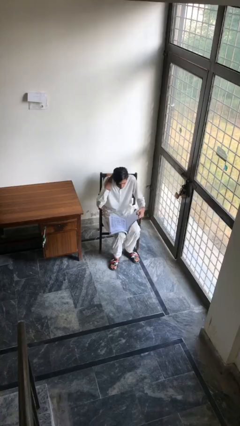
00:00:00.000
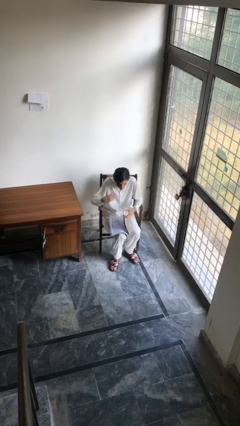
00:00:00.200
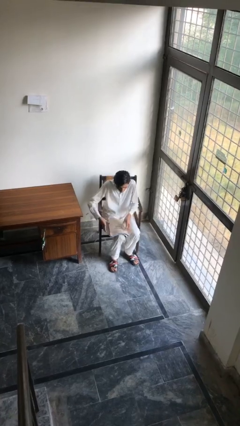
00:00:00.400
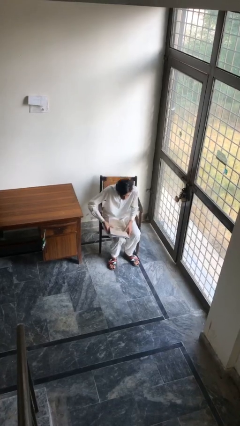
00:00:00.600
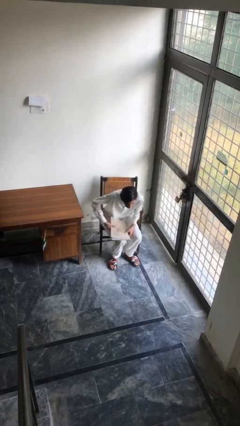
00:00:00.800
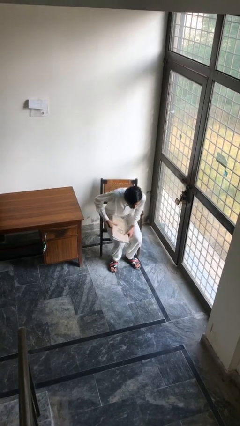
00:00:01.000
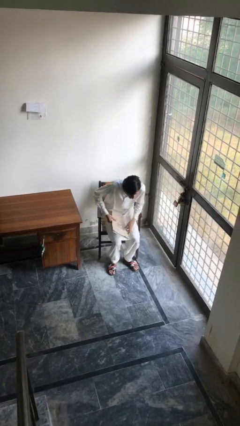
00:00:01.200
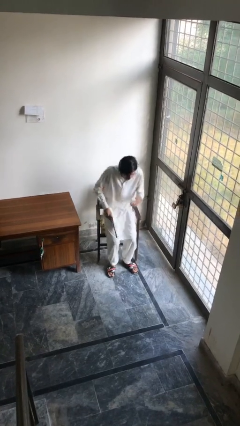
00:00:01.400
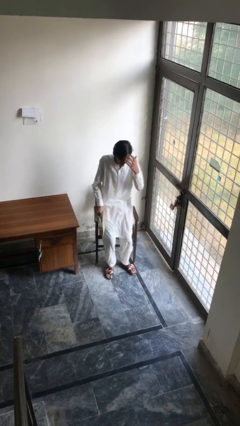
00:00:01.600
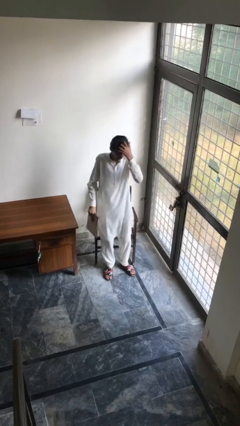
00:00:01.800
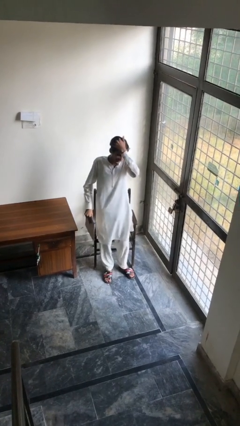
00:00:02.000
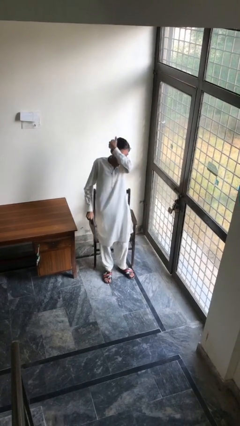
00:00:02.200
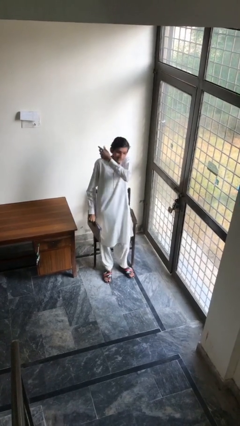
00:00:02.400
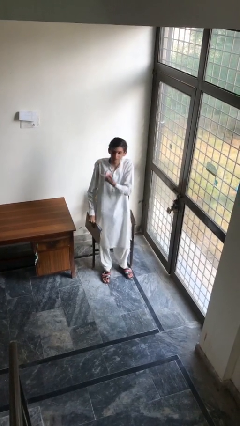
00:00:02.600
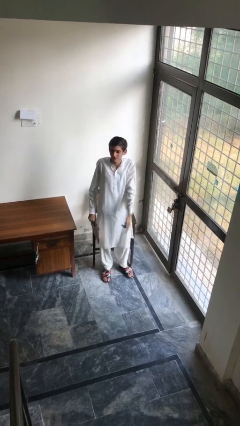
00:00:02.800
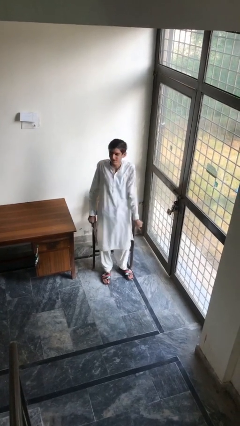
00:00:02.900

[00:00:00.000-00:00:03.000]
person stands up

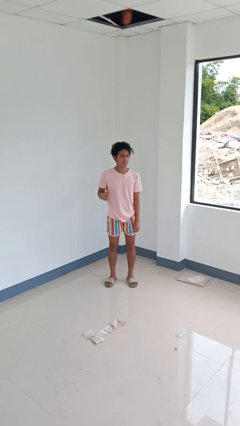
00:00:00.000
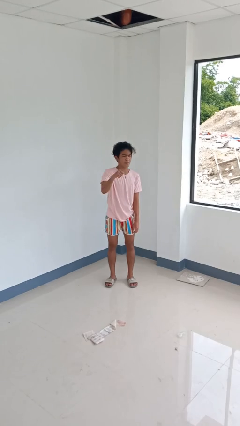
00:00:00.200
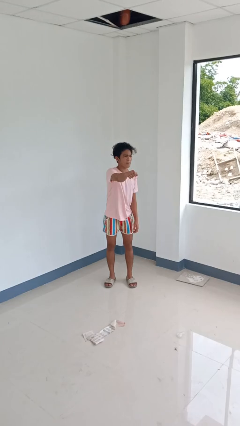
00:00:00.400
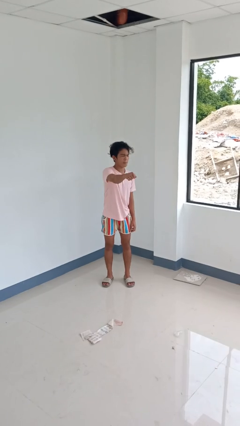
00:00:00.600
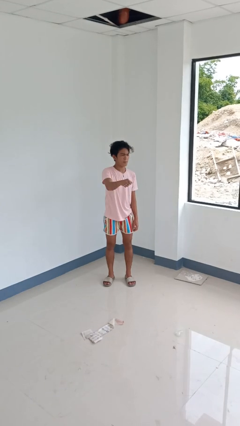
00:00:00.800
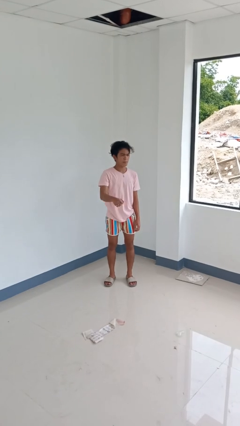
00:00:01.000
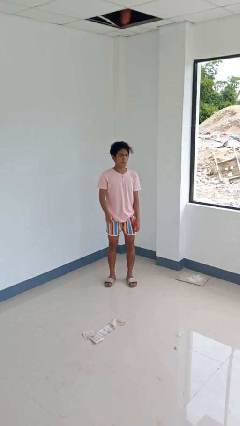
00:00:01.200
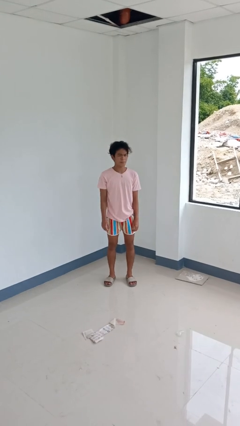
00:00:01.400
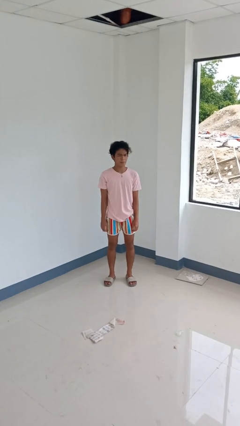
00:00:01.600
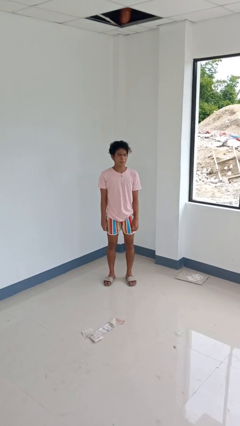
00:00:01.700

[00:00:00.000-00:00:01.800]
person punches

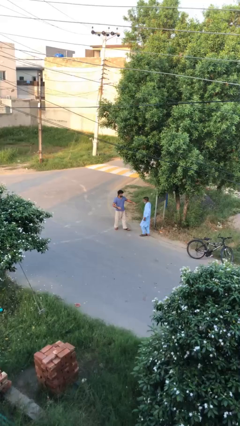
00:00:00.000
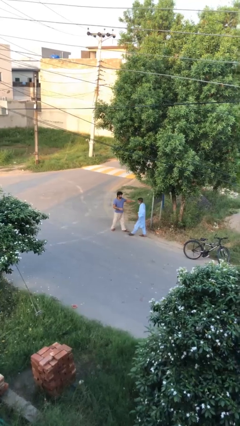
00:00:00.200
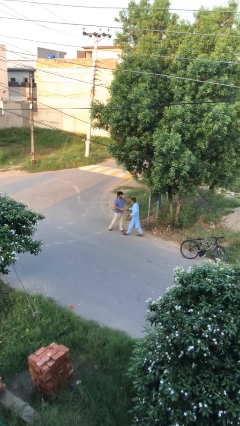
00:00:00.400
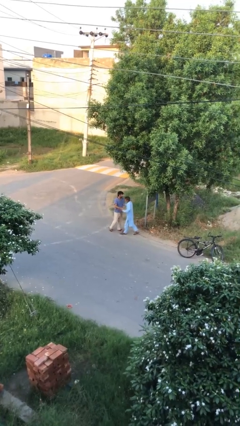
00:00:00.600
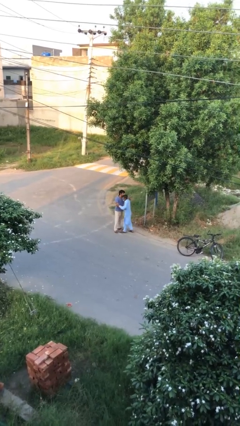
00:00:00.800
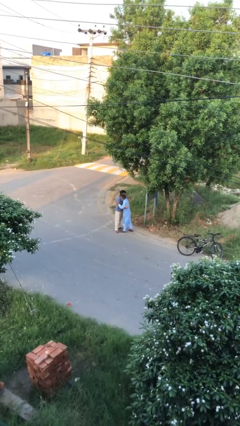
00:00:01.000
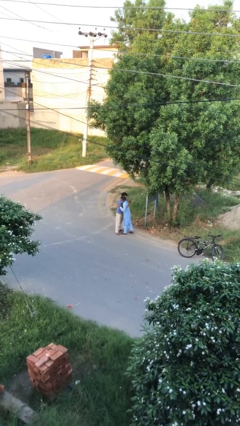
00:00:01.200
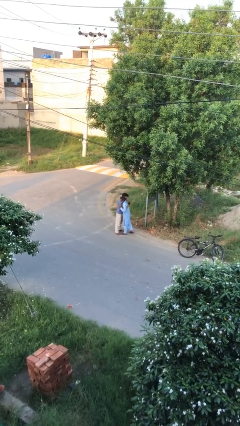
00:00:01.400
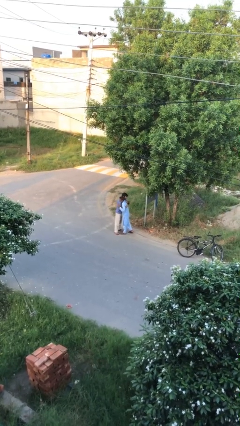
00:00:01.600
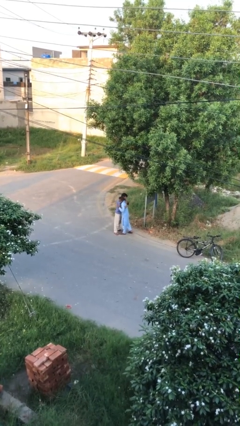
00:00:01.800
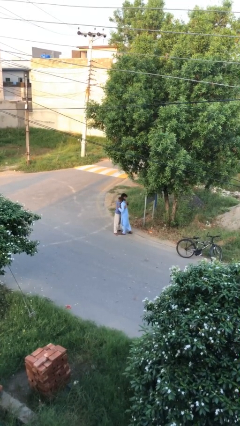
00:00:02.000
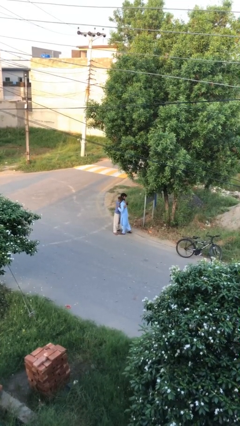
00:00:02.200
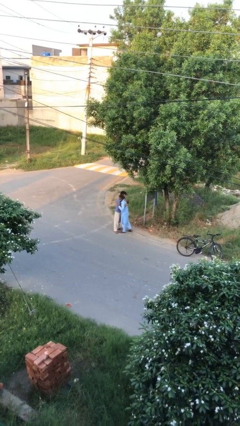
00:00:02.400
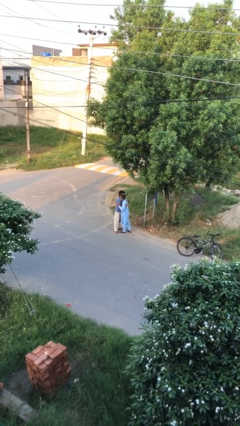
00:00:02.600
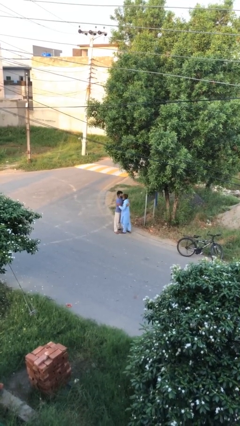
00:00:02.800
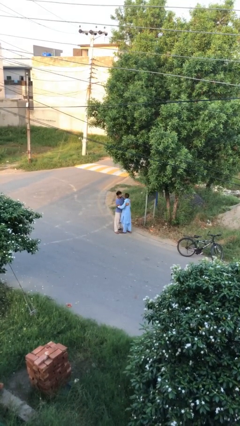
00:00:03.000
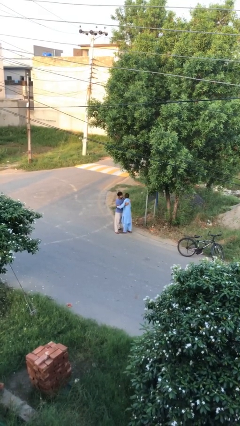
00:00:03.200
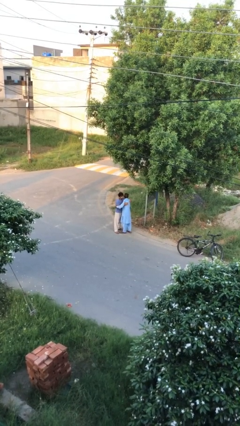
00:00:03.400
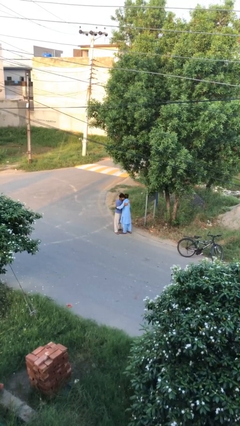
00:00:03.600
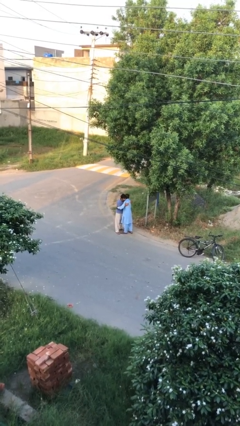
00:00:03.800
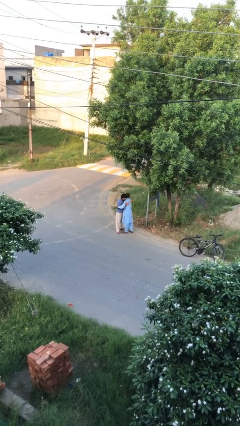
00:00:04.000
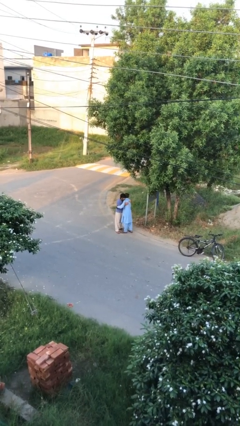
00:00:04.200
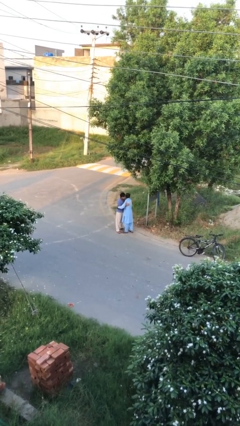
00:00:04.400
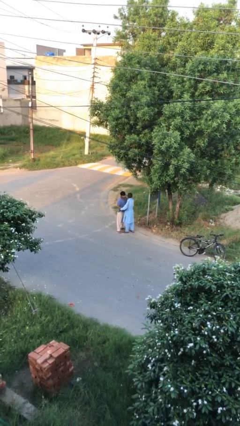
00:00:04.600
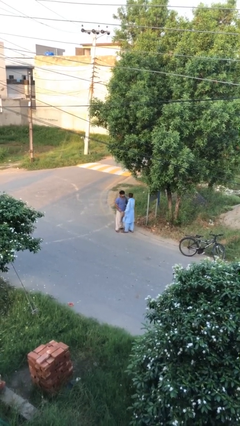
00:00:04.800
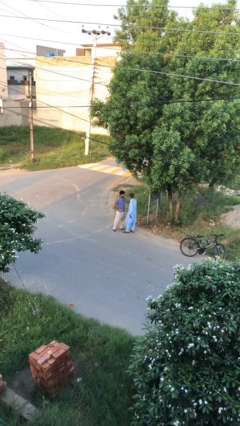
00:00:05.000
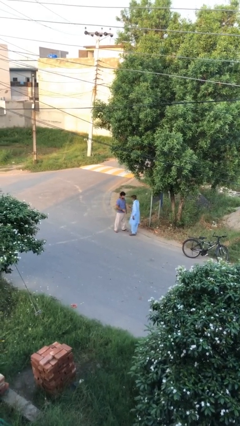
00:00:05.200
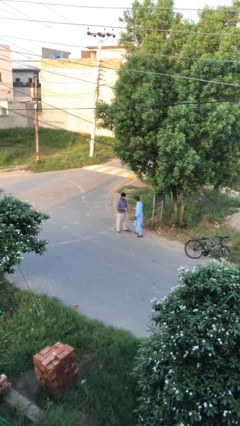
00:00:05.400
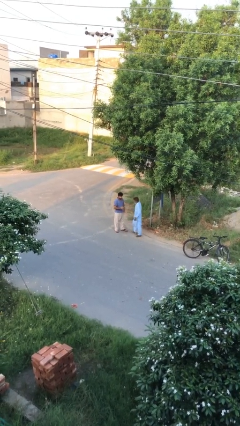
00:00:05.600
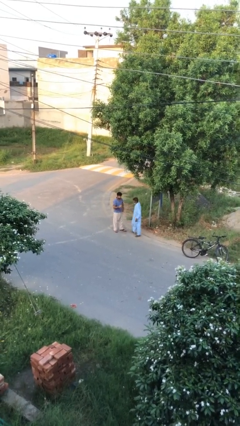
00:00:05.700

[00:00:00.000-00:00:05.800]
person embraces person

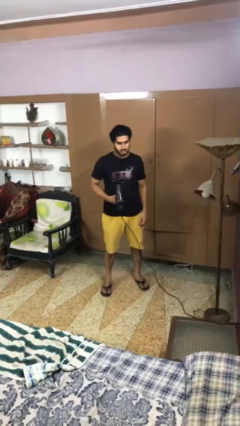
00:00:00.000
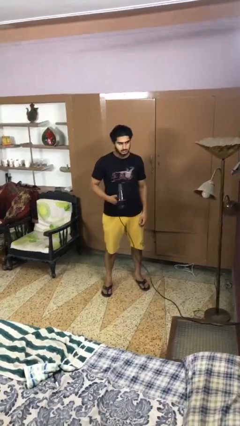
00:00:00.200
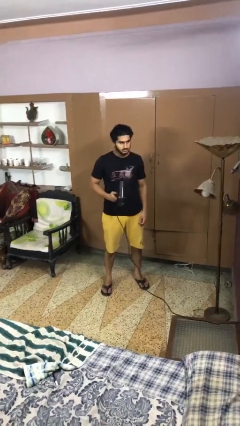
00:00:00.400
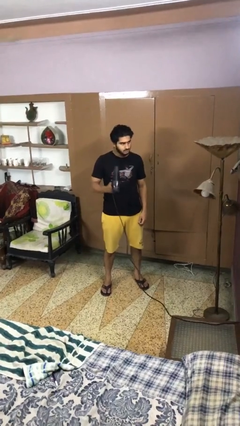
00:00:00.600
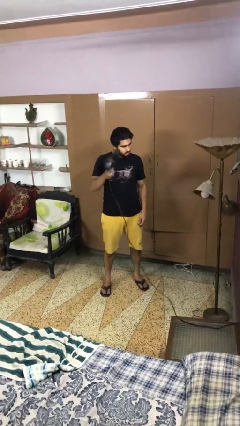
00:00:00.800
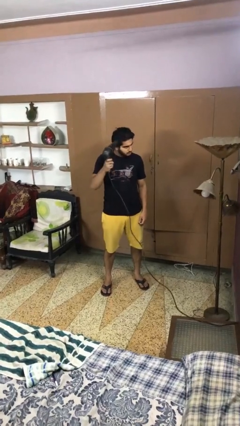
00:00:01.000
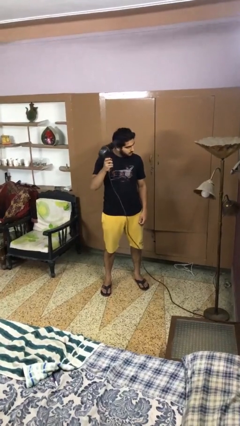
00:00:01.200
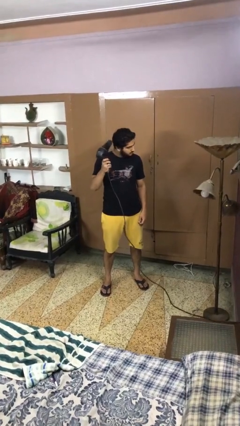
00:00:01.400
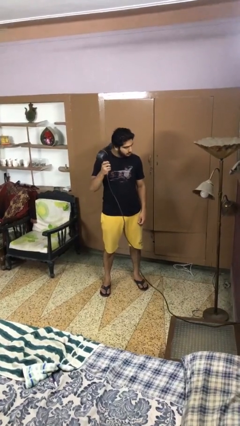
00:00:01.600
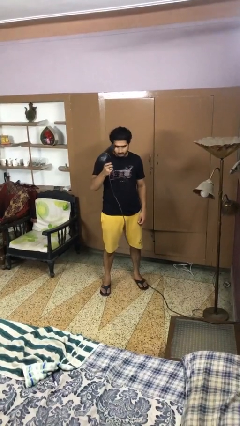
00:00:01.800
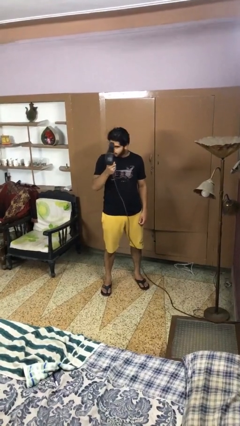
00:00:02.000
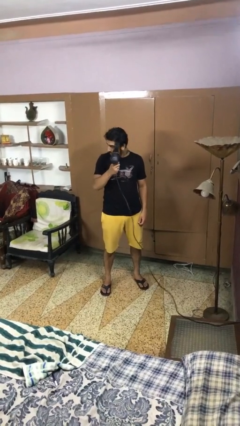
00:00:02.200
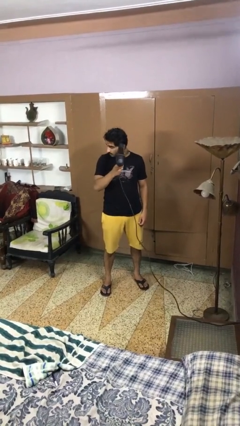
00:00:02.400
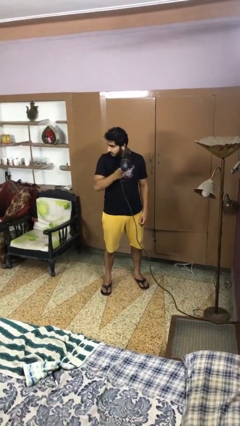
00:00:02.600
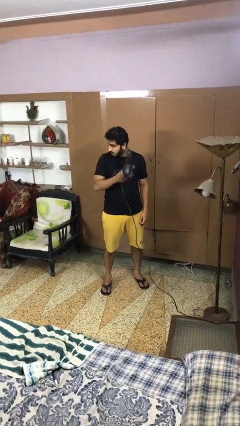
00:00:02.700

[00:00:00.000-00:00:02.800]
person dries hair with hairdryer

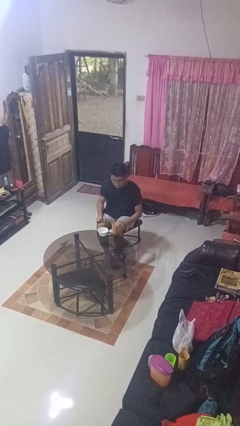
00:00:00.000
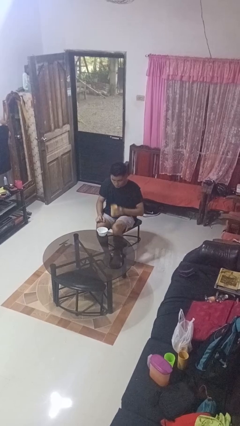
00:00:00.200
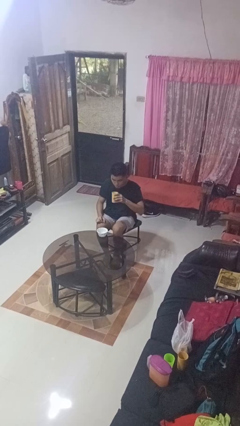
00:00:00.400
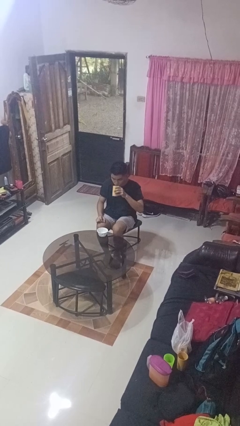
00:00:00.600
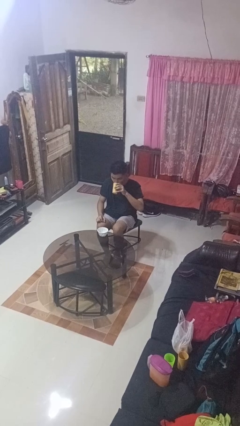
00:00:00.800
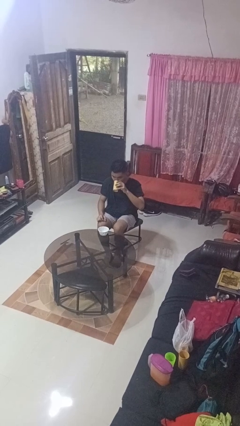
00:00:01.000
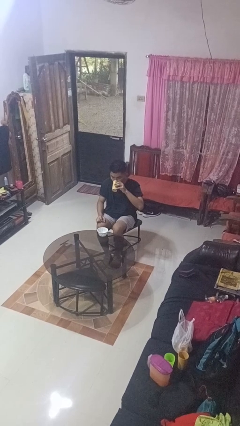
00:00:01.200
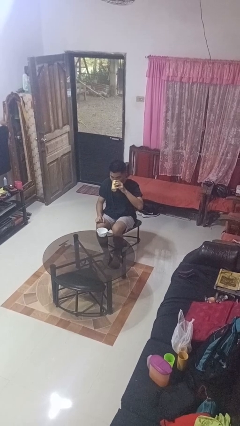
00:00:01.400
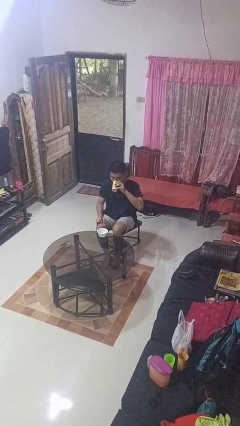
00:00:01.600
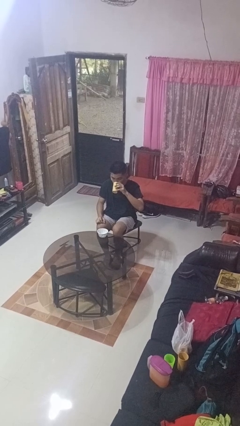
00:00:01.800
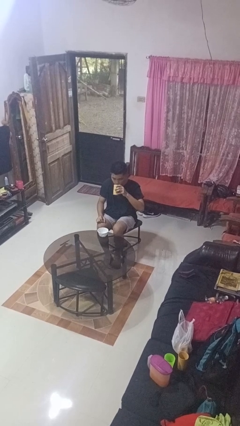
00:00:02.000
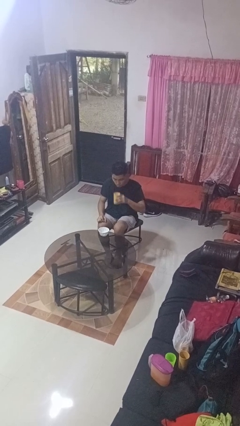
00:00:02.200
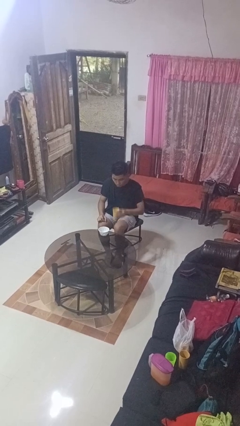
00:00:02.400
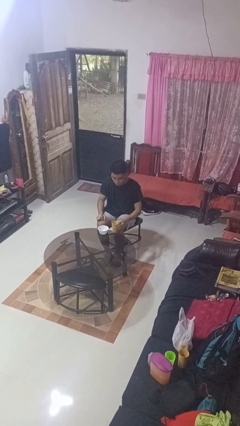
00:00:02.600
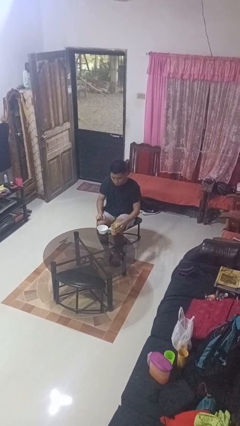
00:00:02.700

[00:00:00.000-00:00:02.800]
person drinks from cup

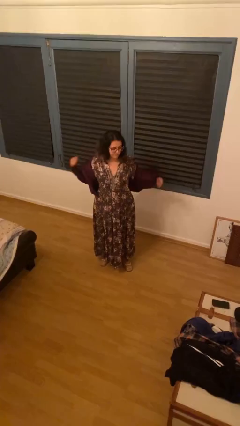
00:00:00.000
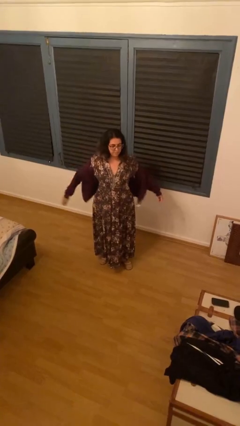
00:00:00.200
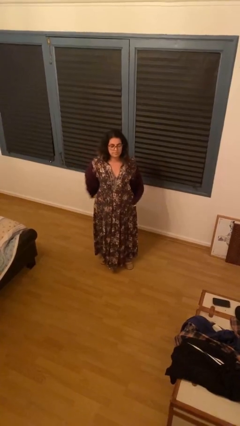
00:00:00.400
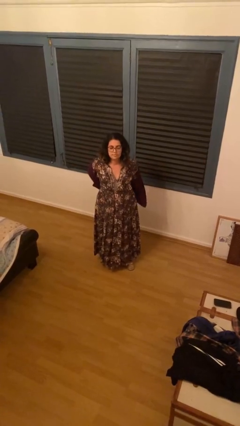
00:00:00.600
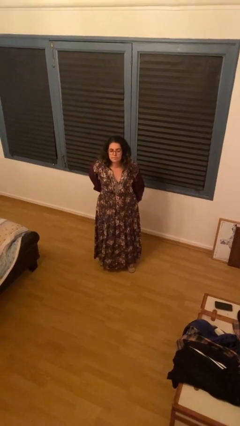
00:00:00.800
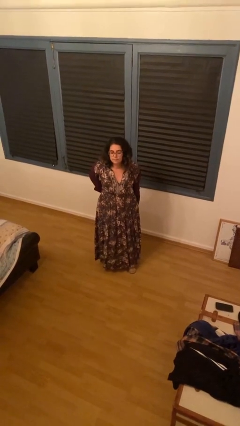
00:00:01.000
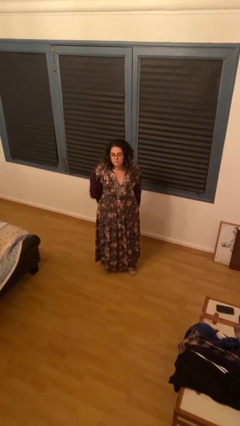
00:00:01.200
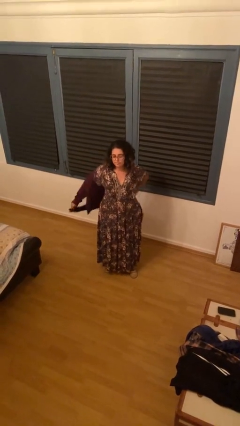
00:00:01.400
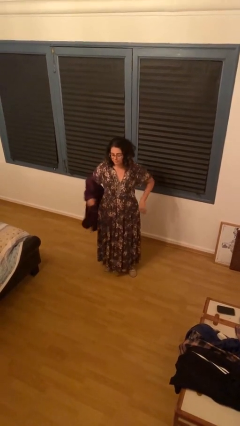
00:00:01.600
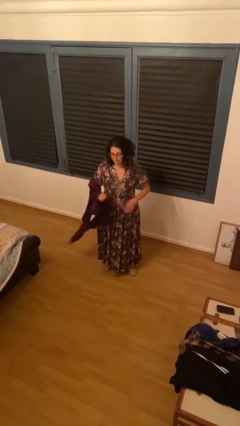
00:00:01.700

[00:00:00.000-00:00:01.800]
person takes off jacket
